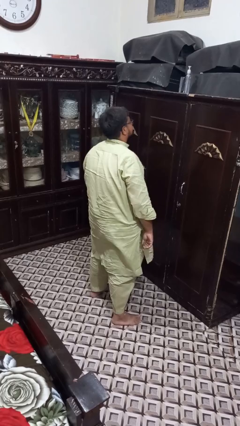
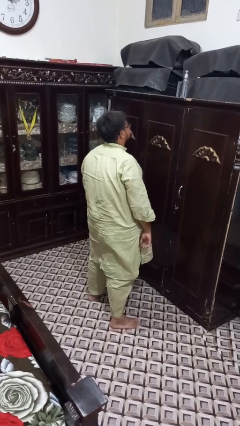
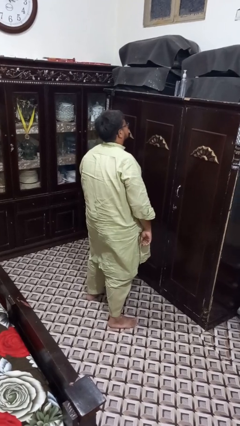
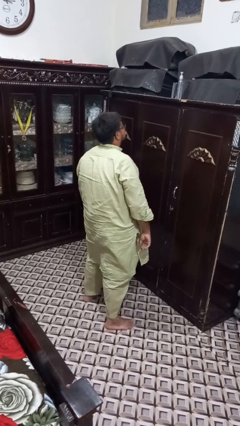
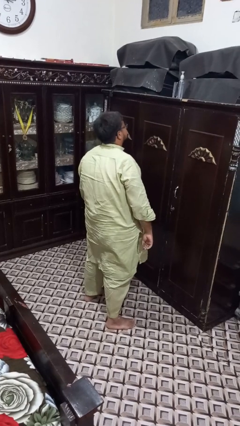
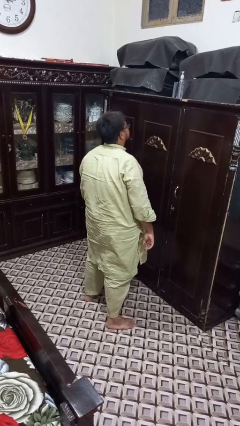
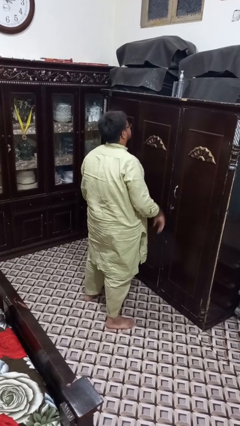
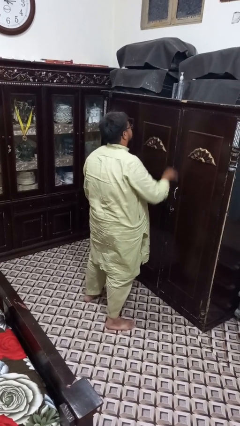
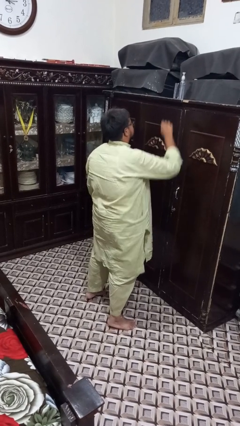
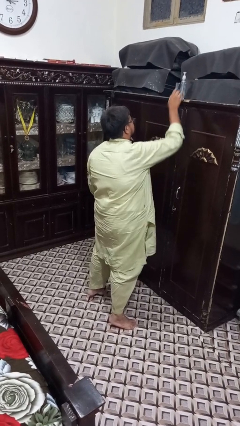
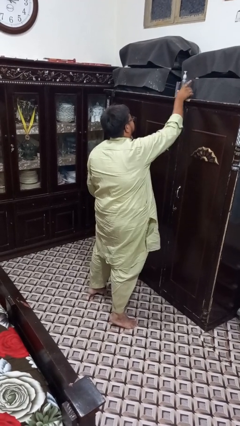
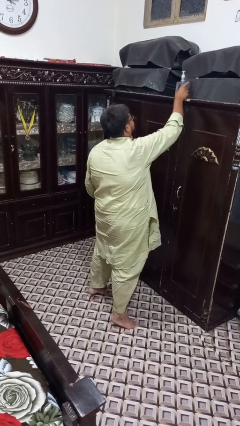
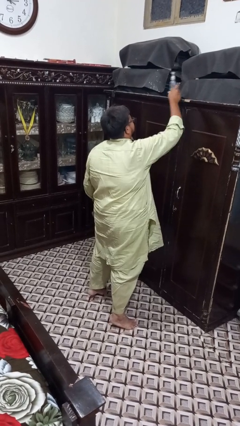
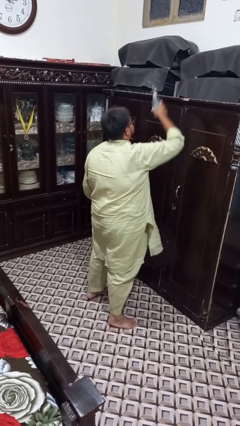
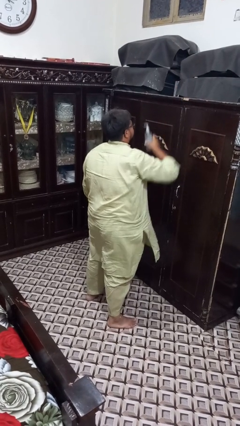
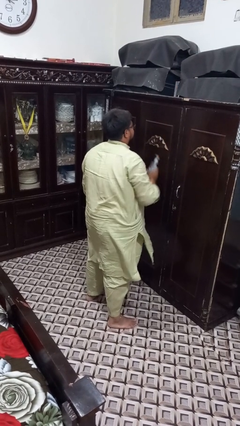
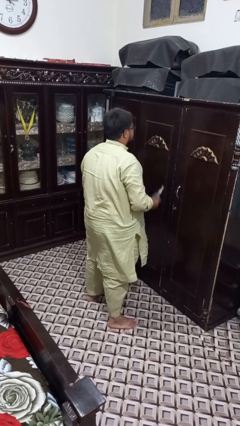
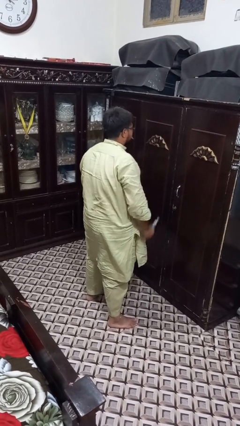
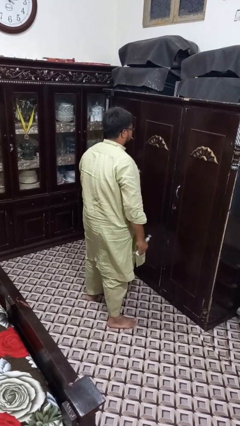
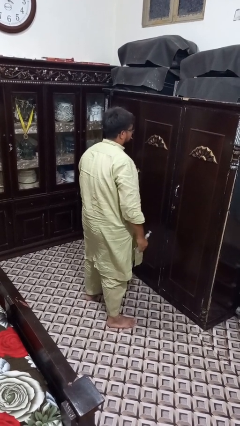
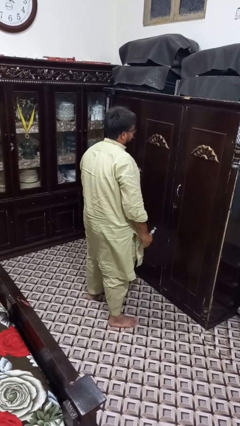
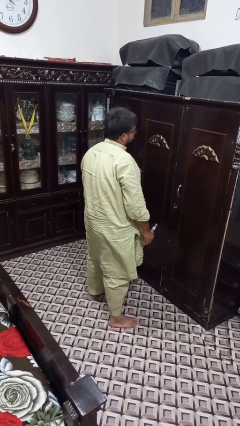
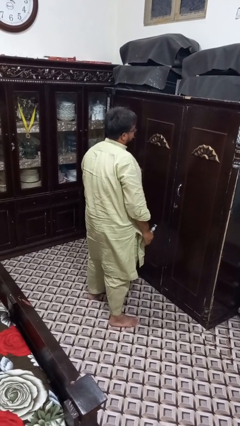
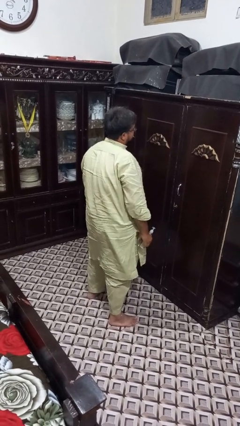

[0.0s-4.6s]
person picks up object from cabinet

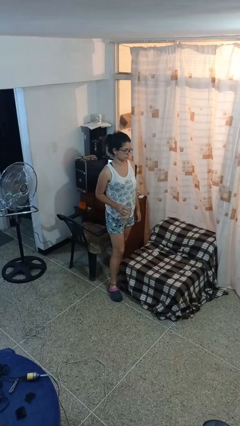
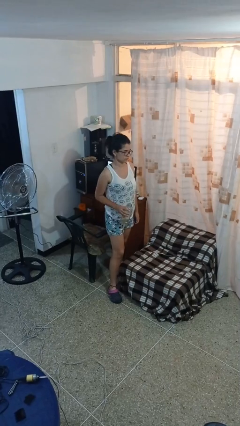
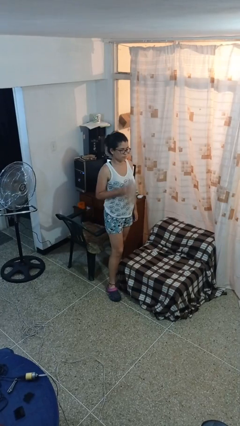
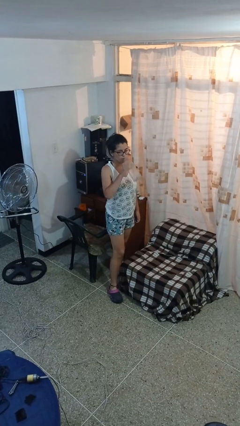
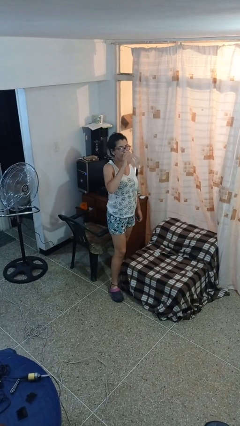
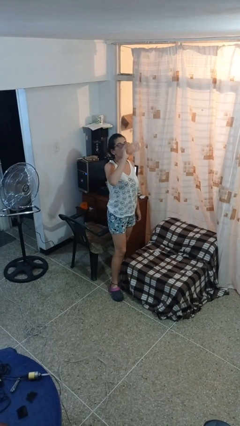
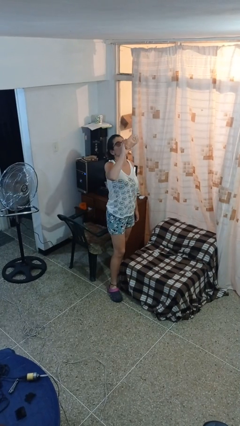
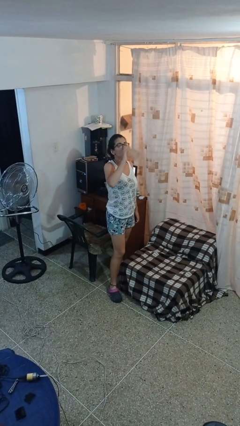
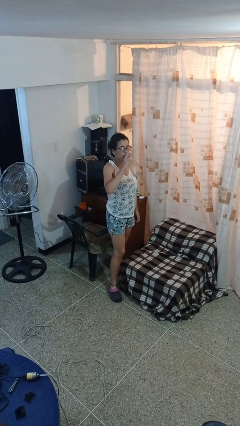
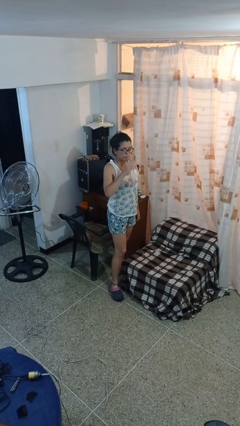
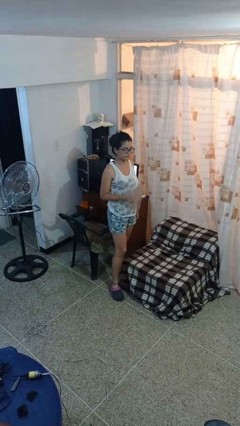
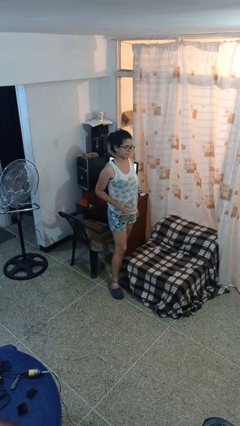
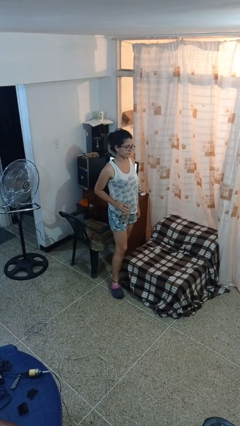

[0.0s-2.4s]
person drinks from bottle

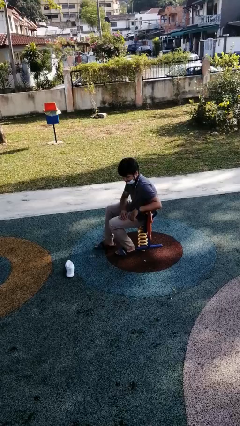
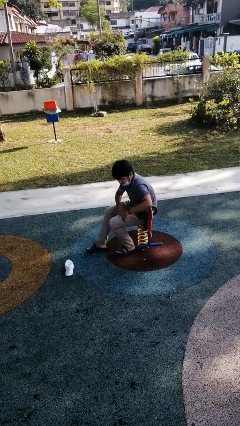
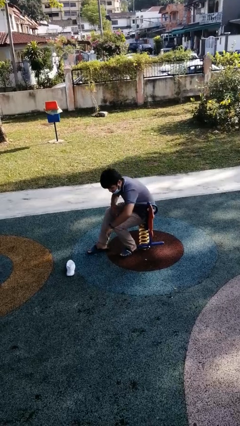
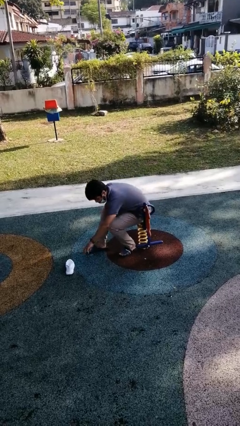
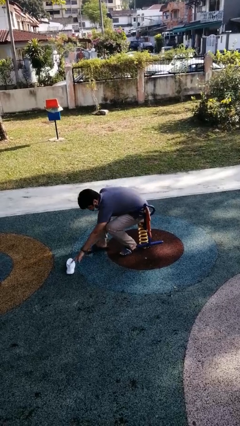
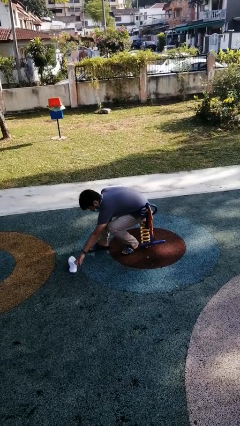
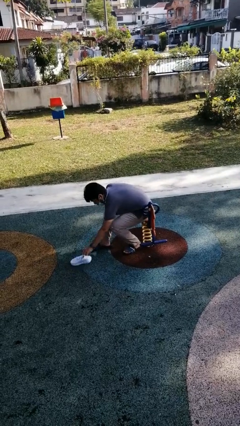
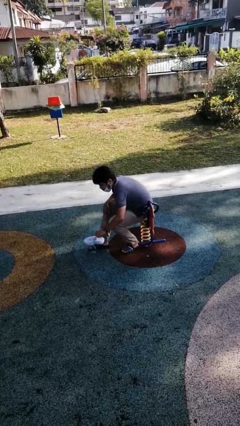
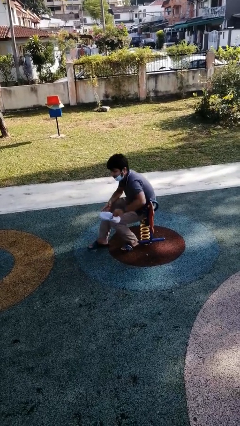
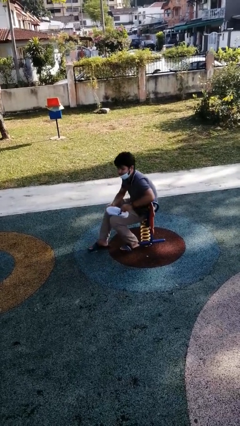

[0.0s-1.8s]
person picks up object from floor

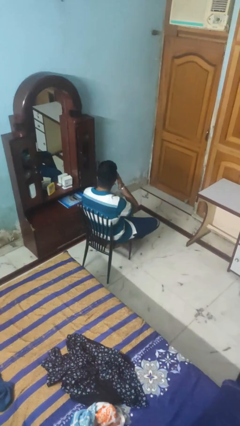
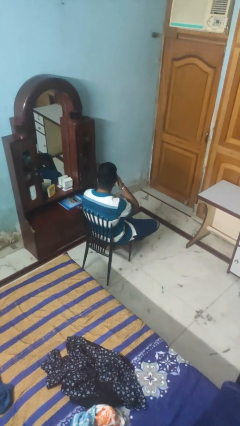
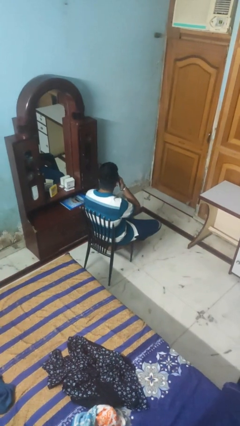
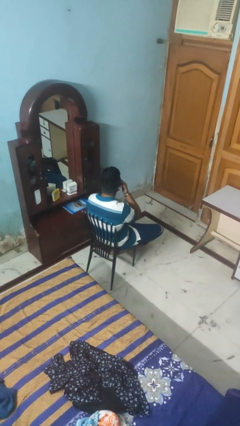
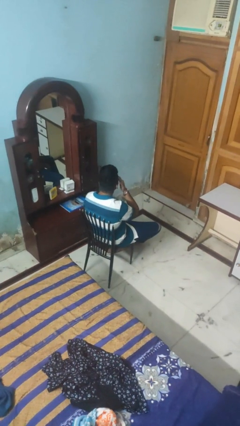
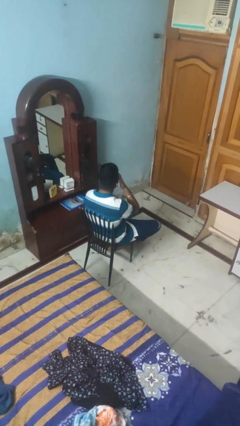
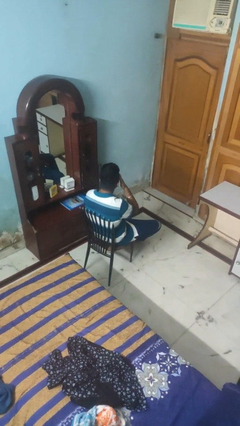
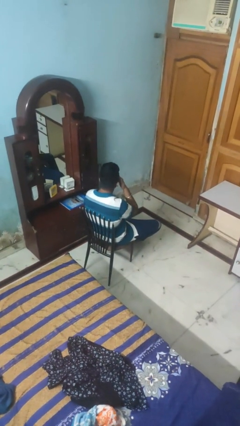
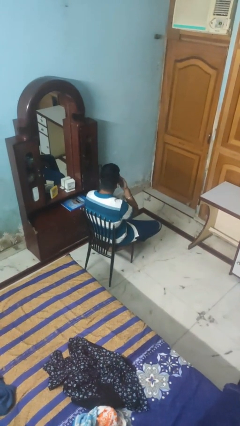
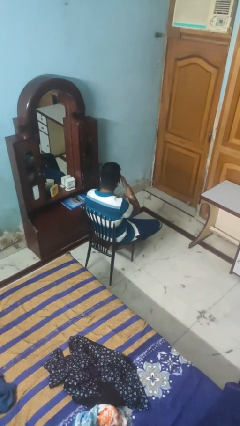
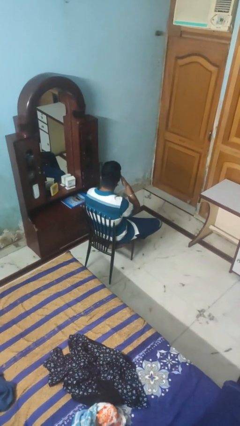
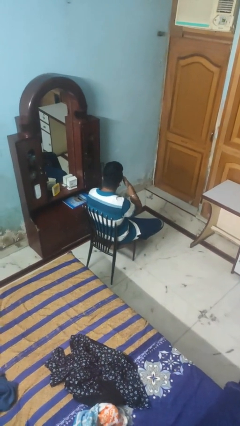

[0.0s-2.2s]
person rubs eyes

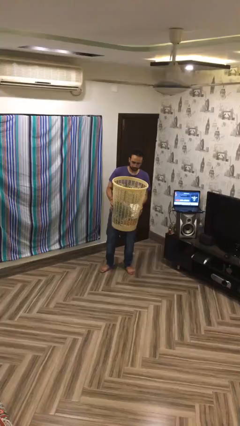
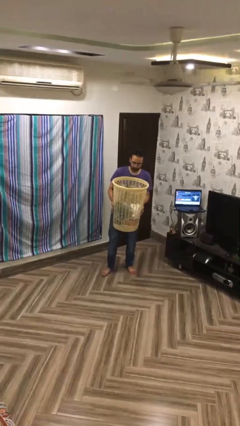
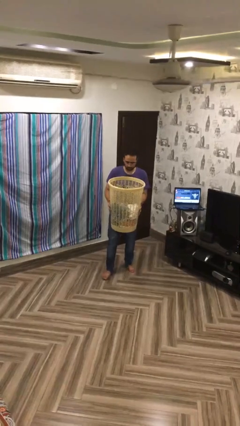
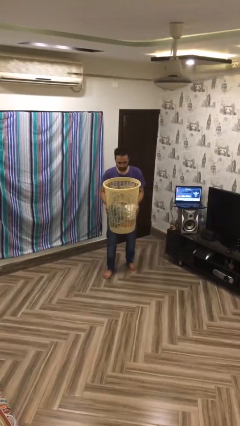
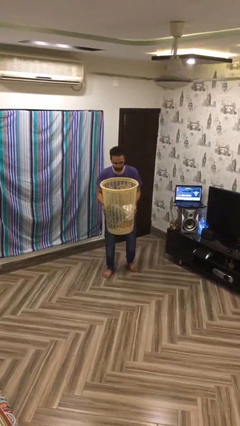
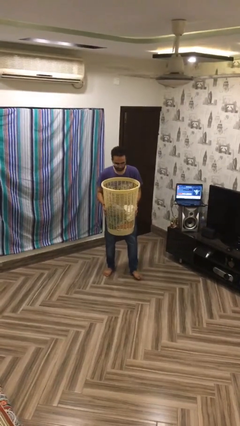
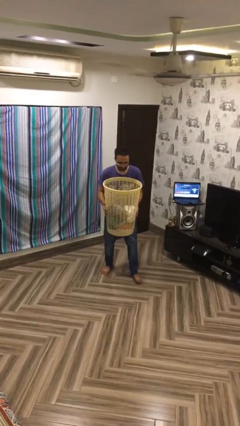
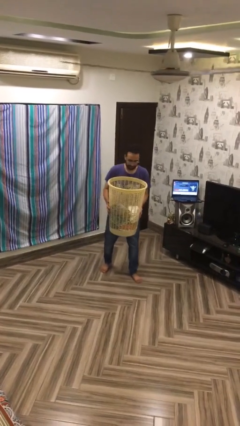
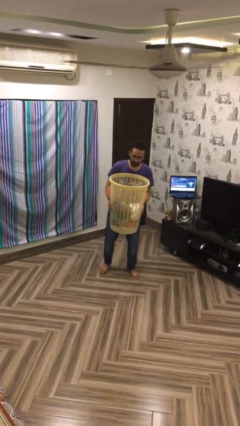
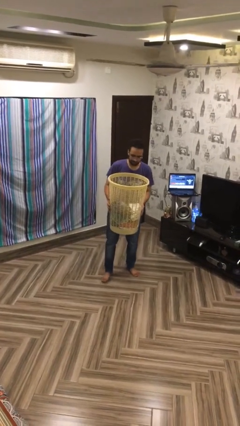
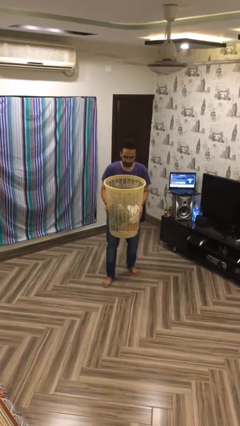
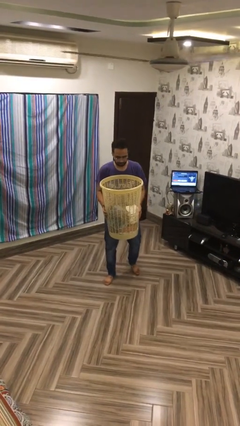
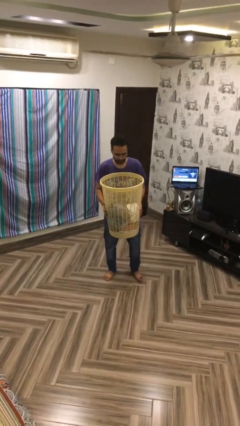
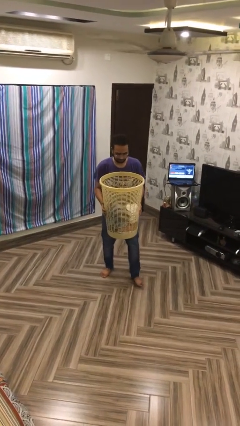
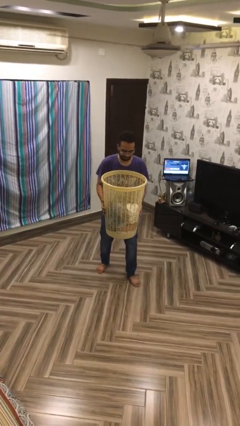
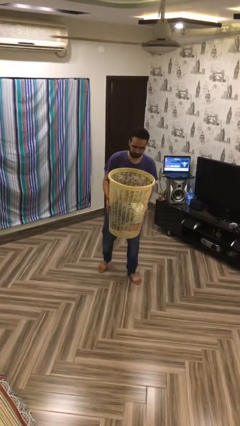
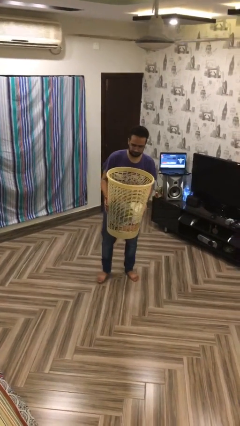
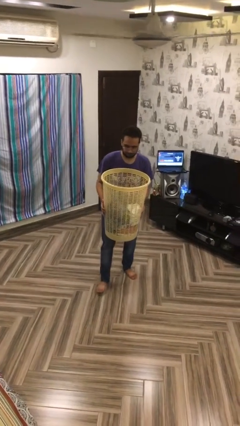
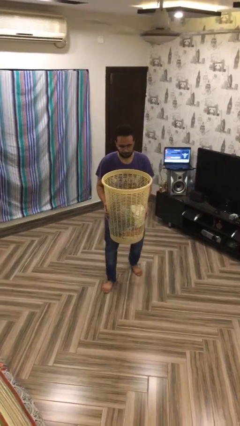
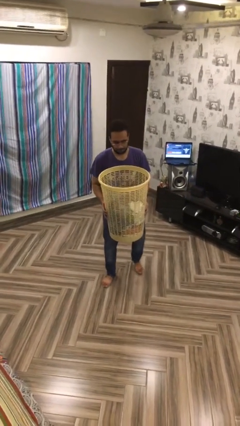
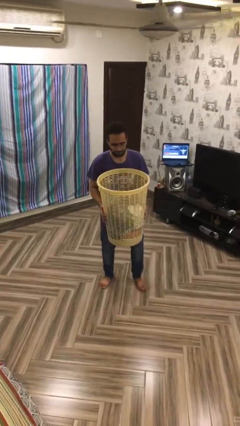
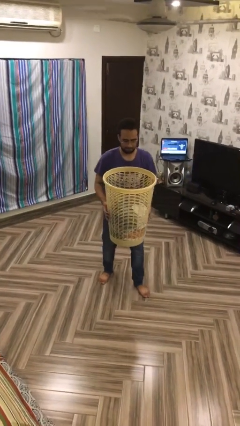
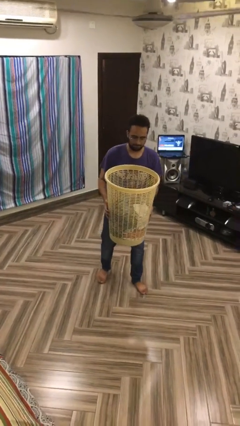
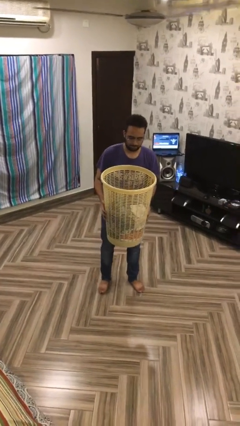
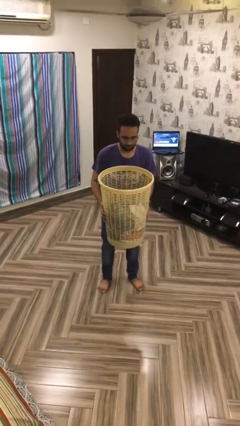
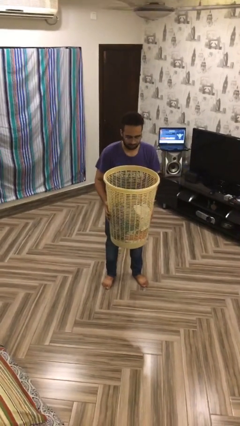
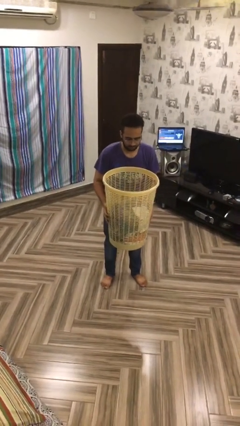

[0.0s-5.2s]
person carries heavy object

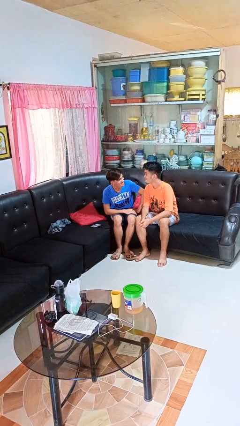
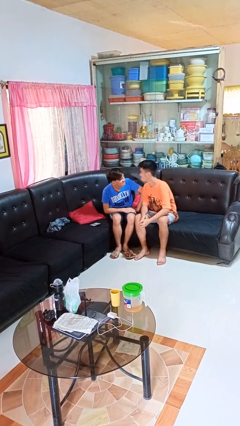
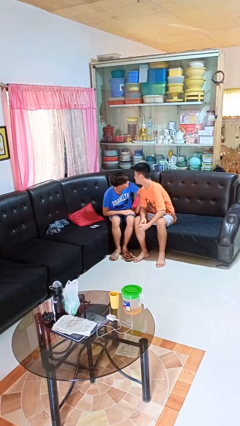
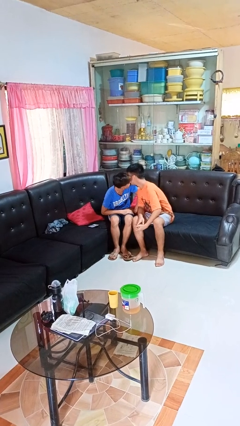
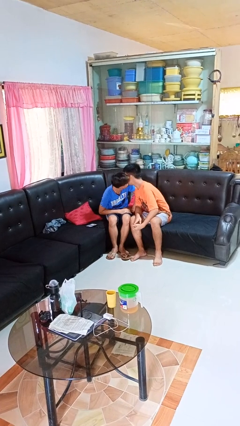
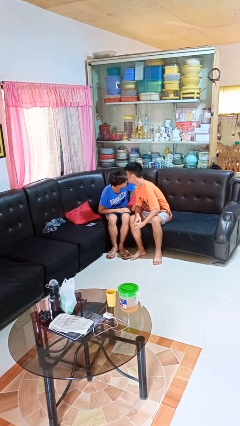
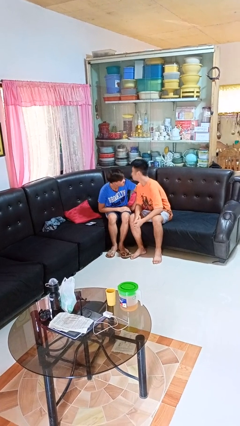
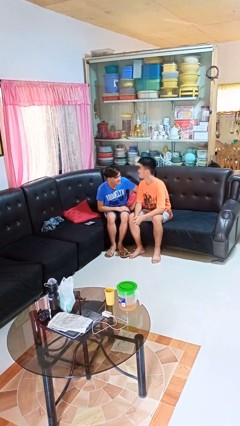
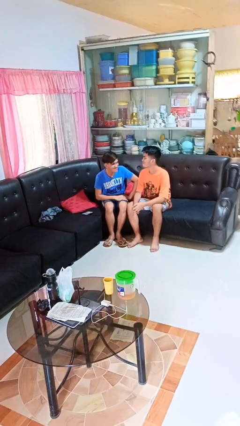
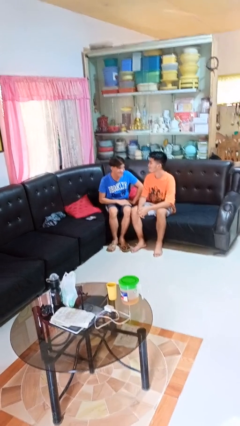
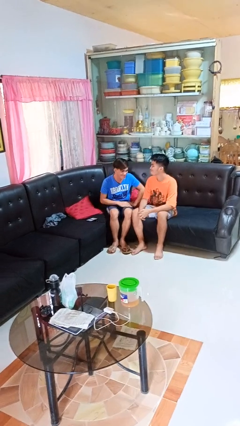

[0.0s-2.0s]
person kisses cheek of person
